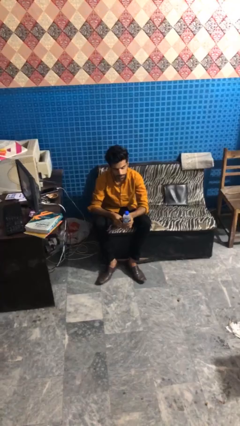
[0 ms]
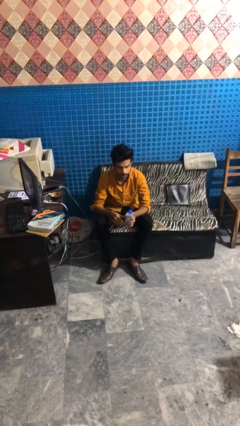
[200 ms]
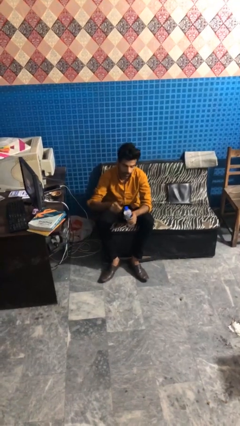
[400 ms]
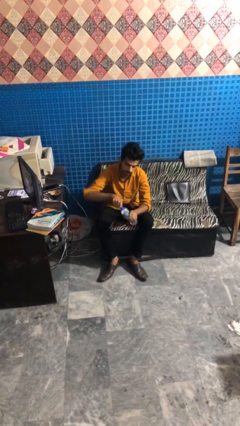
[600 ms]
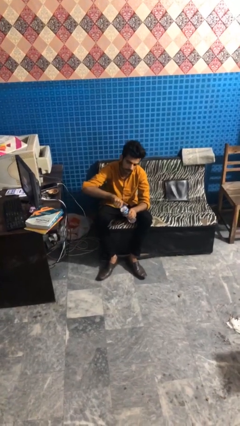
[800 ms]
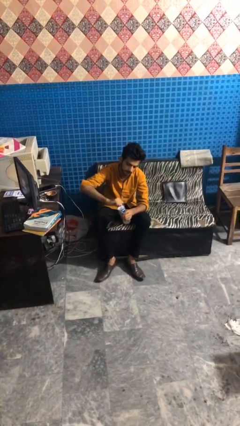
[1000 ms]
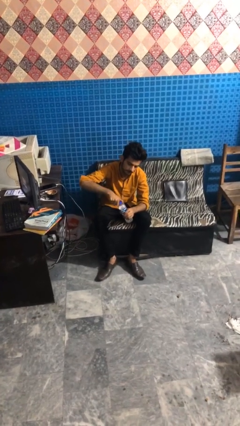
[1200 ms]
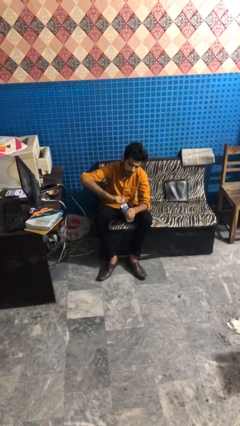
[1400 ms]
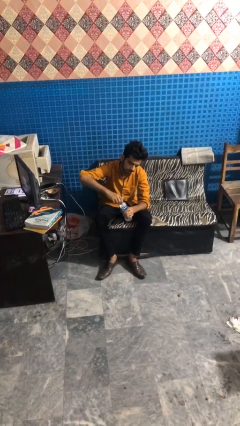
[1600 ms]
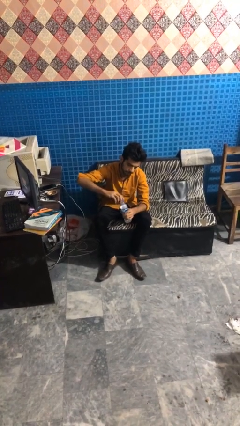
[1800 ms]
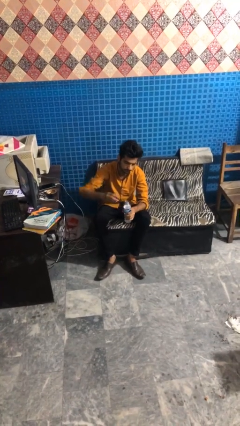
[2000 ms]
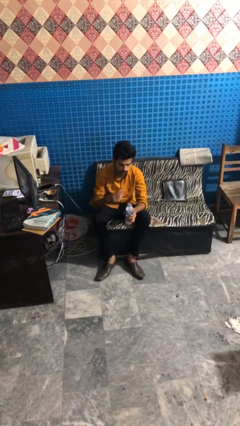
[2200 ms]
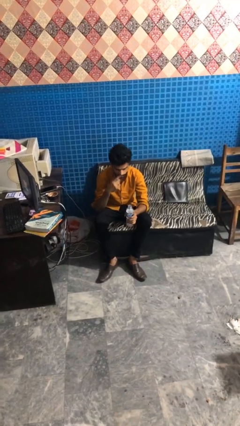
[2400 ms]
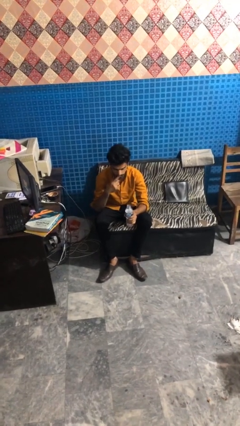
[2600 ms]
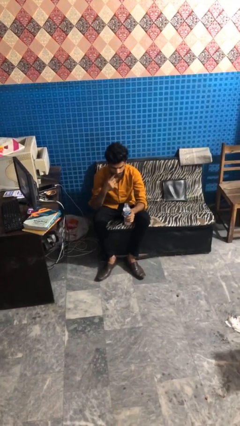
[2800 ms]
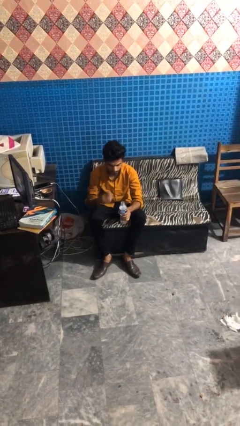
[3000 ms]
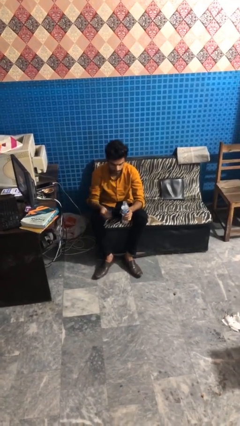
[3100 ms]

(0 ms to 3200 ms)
person unscrews lid from bottle

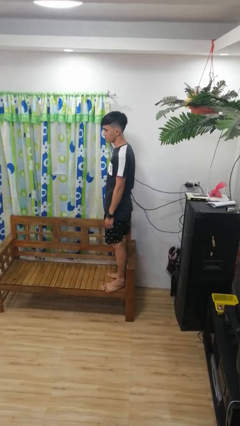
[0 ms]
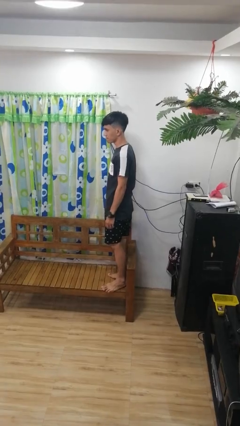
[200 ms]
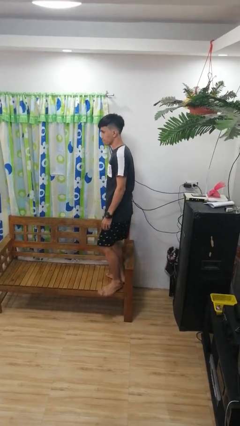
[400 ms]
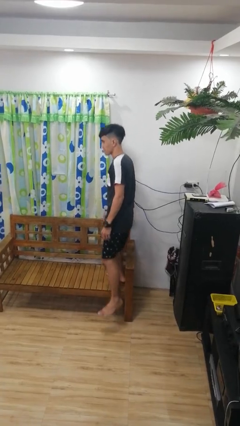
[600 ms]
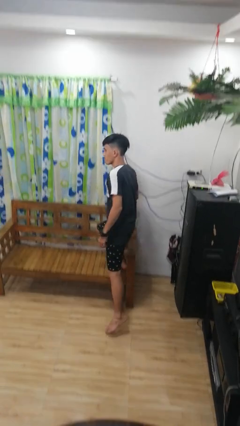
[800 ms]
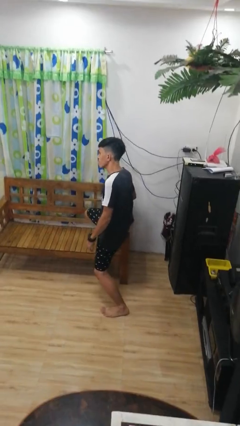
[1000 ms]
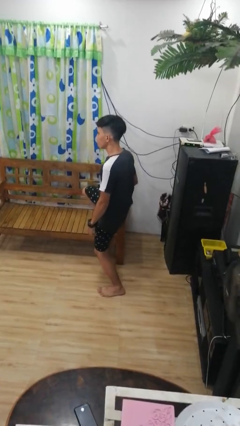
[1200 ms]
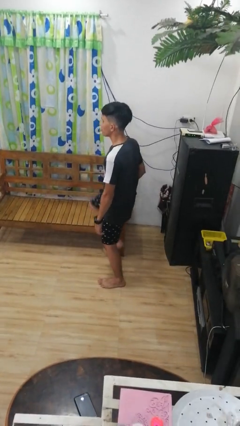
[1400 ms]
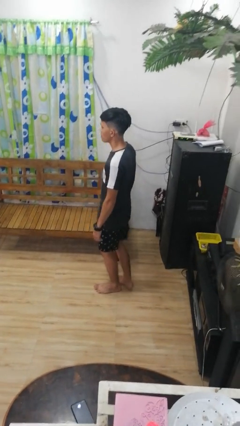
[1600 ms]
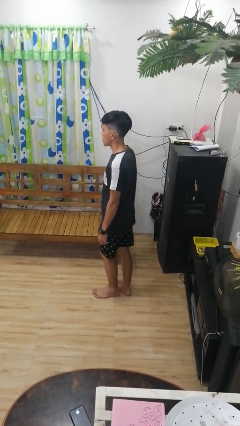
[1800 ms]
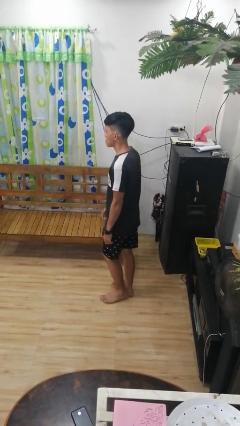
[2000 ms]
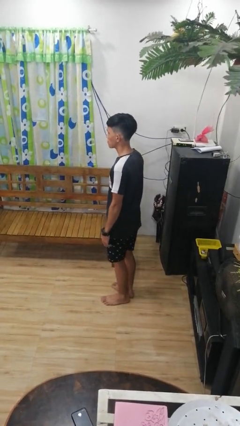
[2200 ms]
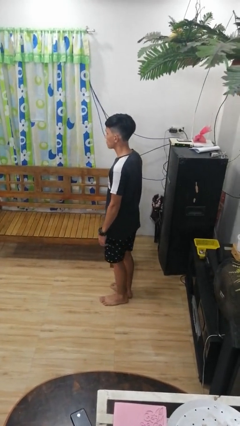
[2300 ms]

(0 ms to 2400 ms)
person climbs off couch

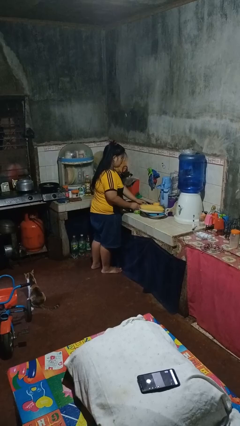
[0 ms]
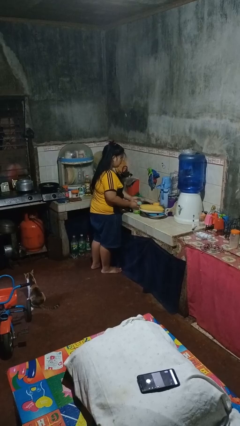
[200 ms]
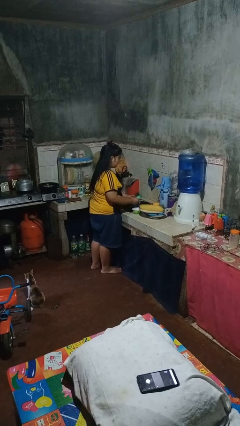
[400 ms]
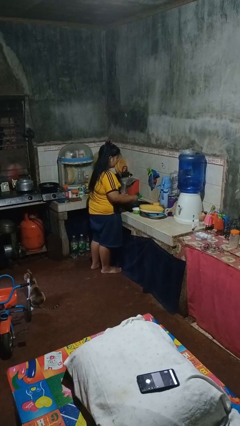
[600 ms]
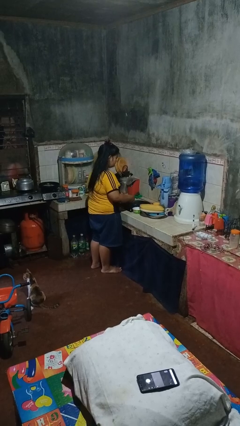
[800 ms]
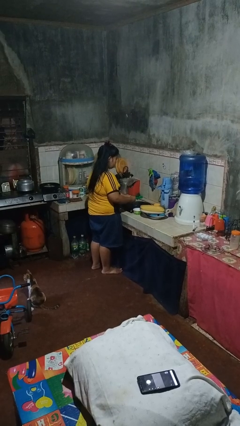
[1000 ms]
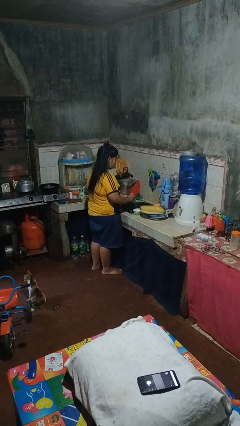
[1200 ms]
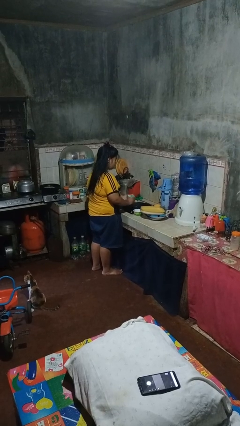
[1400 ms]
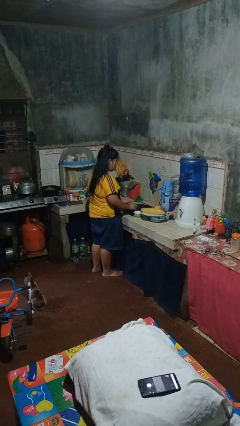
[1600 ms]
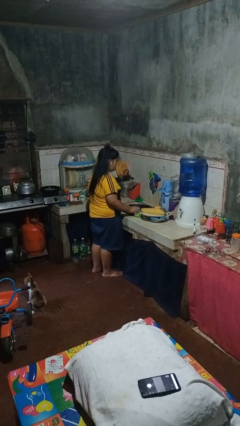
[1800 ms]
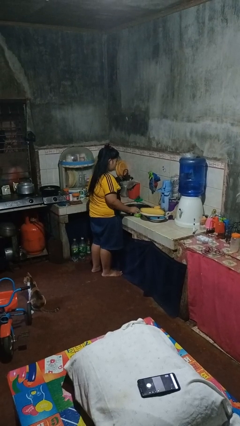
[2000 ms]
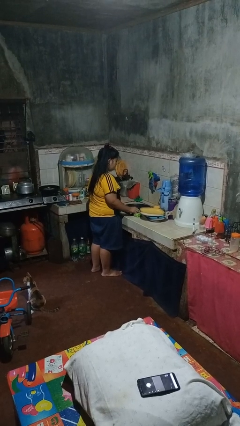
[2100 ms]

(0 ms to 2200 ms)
person washes dish

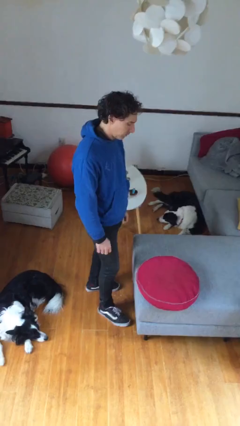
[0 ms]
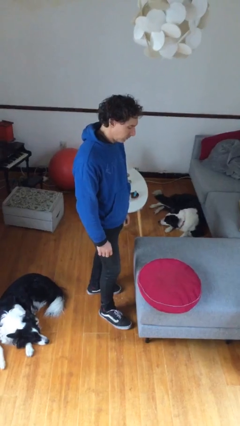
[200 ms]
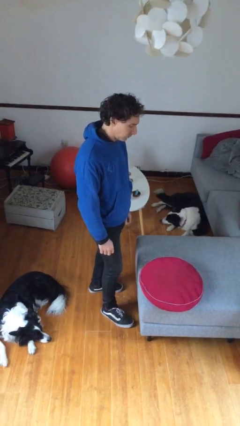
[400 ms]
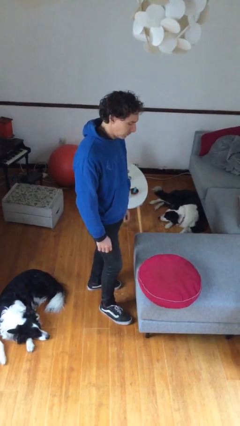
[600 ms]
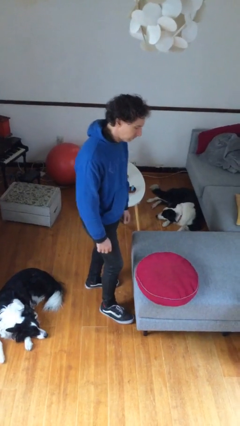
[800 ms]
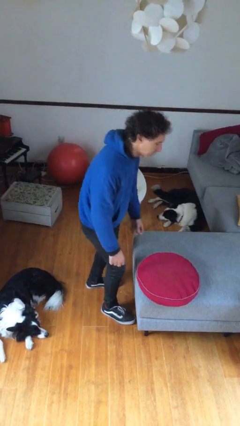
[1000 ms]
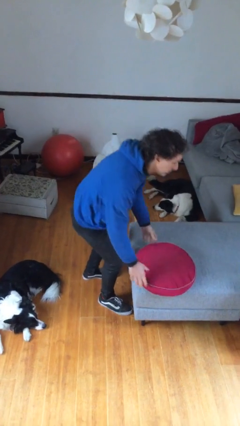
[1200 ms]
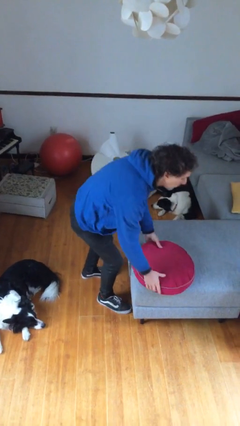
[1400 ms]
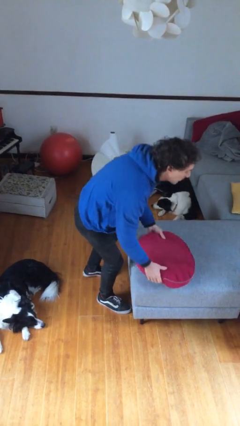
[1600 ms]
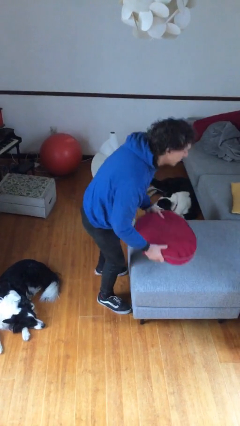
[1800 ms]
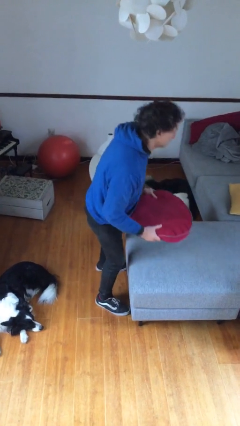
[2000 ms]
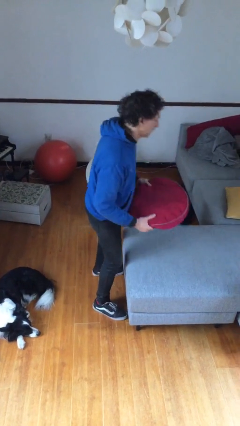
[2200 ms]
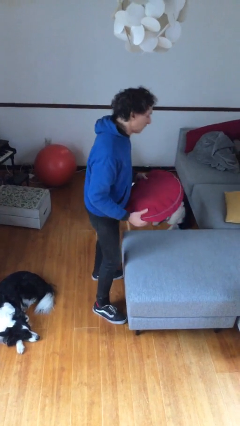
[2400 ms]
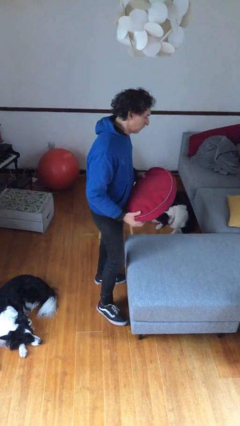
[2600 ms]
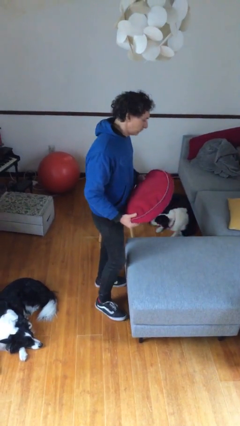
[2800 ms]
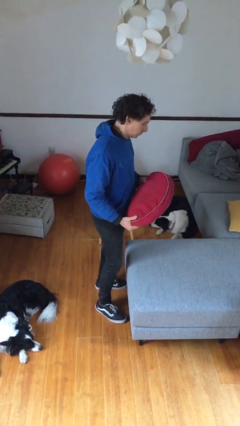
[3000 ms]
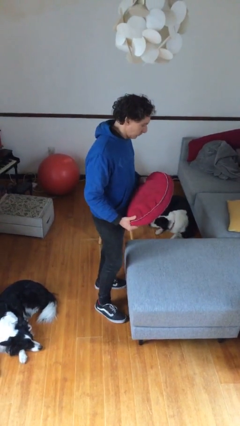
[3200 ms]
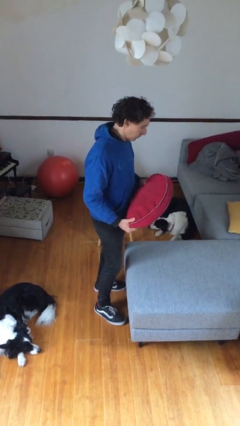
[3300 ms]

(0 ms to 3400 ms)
person picks up object from couch

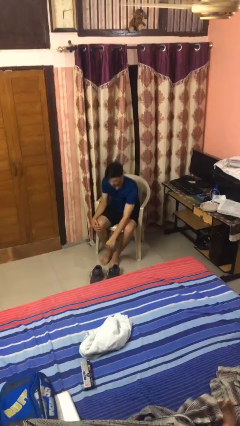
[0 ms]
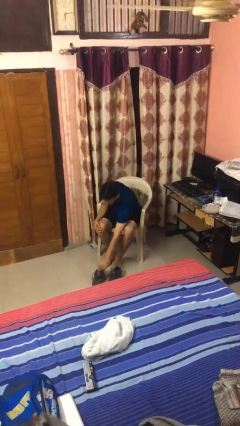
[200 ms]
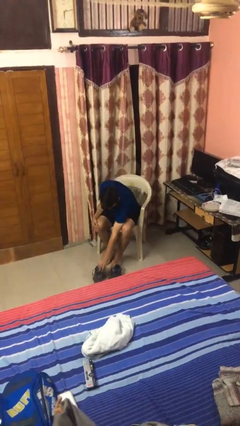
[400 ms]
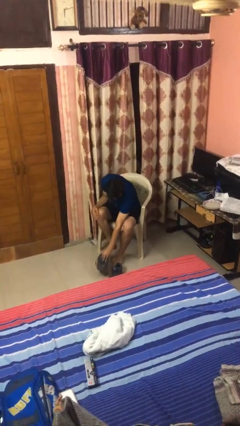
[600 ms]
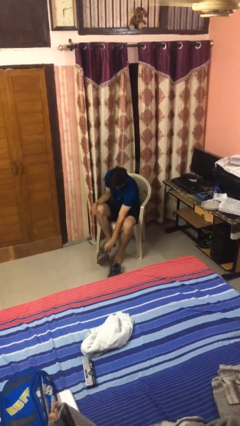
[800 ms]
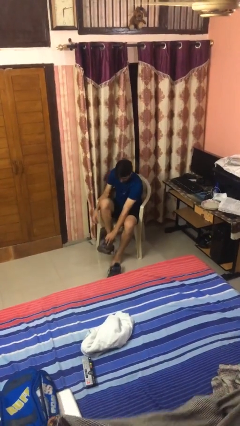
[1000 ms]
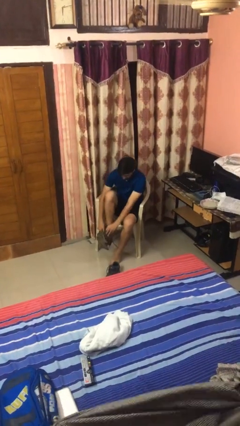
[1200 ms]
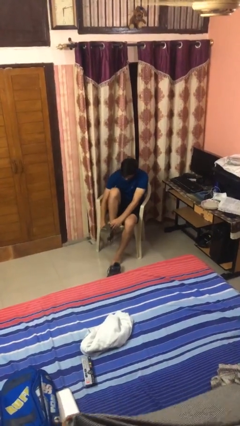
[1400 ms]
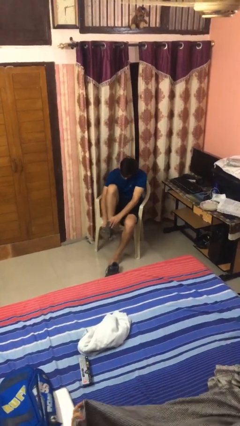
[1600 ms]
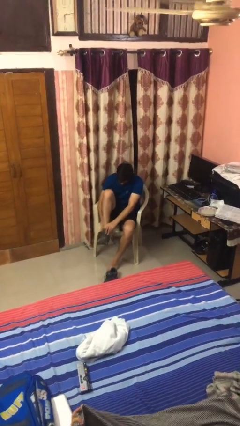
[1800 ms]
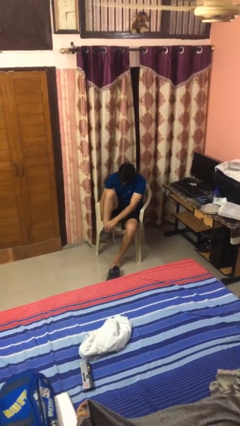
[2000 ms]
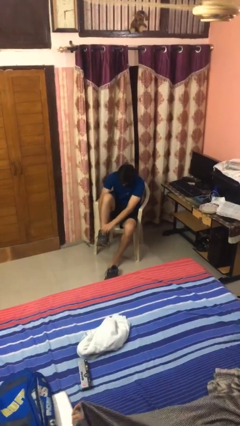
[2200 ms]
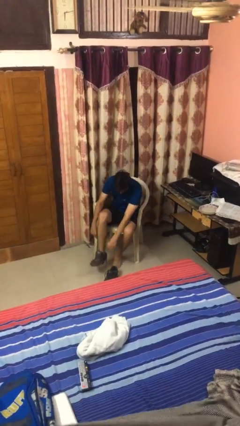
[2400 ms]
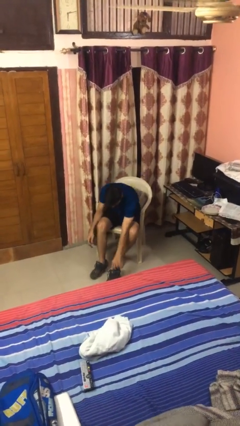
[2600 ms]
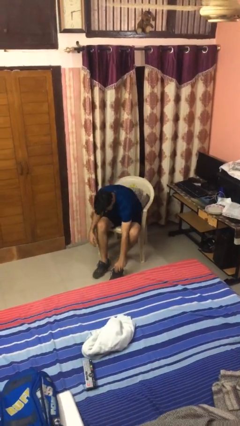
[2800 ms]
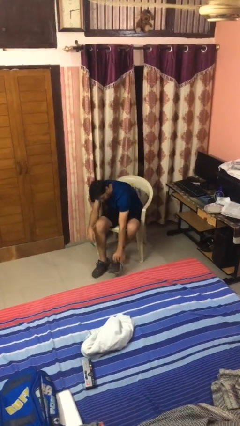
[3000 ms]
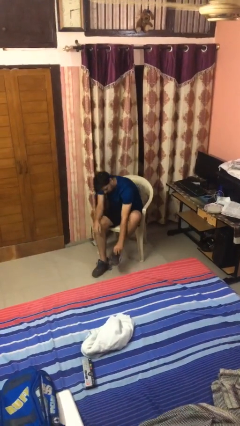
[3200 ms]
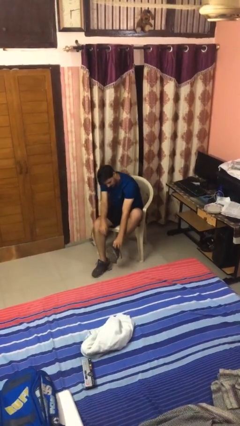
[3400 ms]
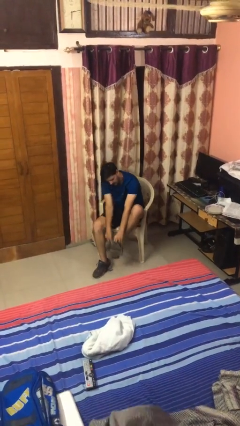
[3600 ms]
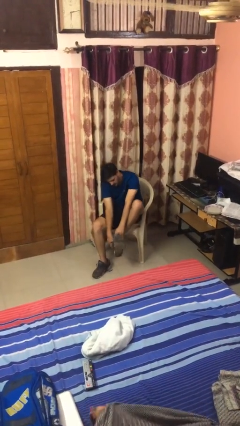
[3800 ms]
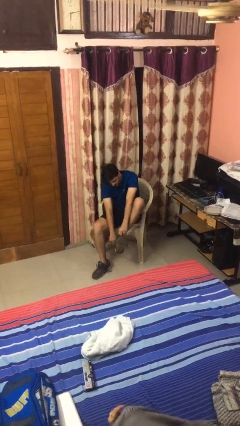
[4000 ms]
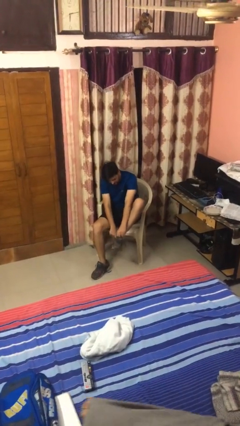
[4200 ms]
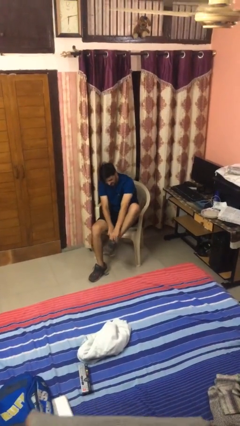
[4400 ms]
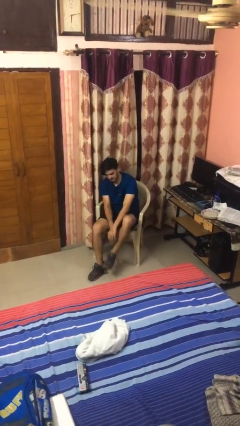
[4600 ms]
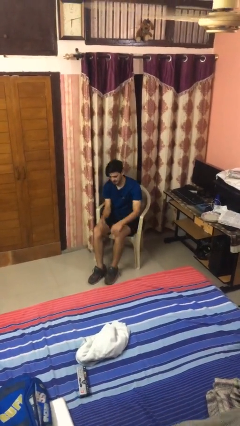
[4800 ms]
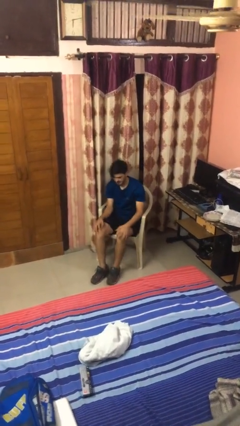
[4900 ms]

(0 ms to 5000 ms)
person puts on boots

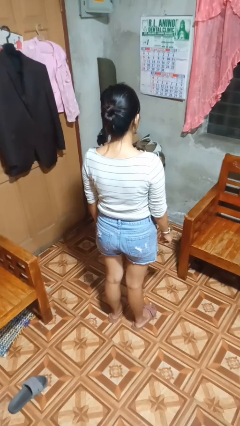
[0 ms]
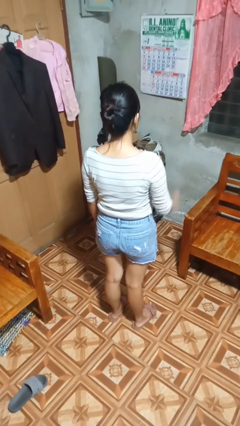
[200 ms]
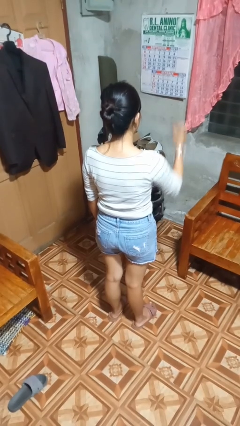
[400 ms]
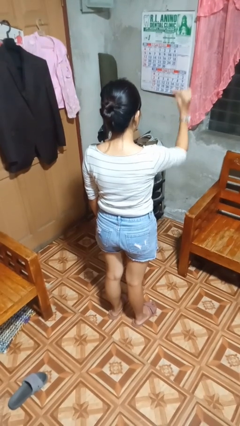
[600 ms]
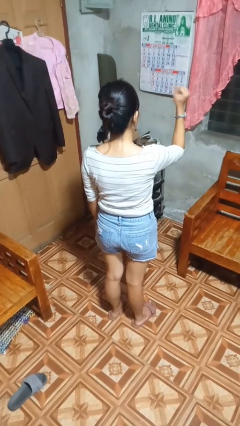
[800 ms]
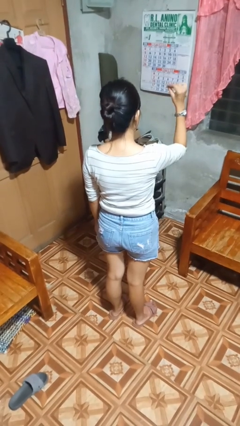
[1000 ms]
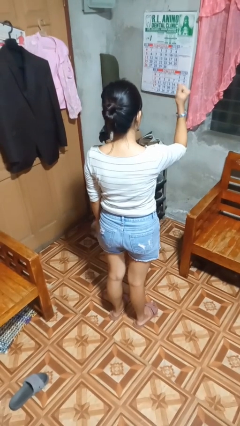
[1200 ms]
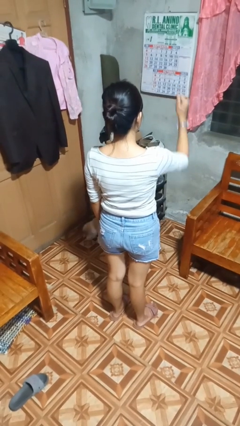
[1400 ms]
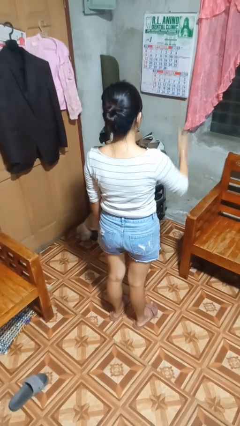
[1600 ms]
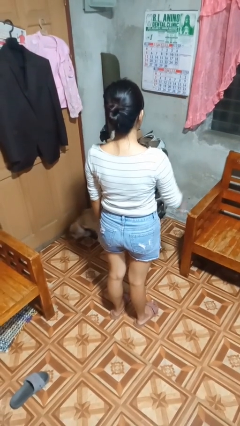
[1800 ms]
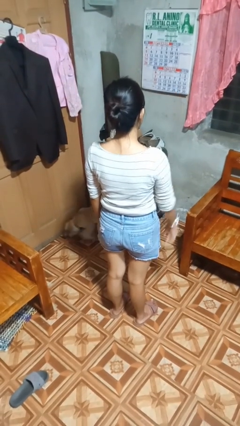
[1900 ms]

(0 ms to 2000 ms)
person snaps fingers
